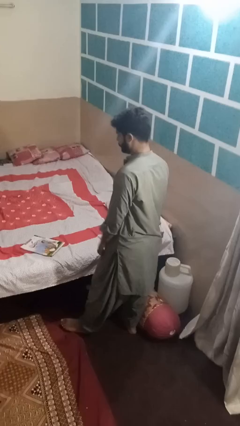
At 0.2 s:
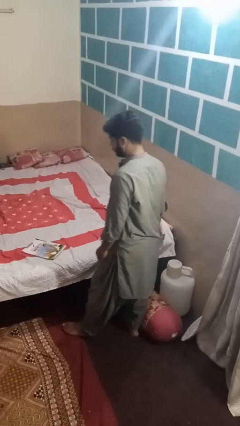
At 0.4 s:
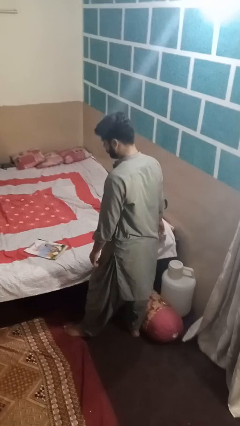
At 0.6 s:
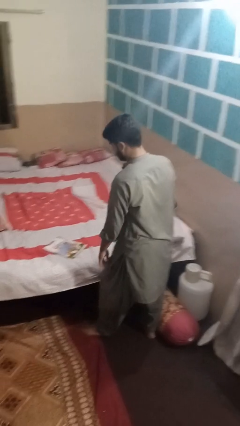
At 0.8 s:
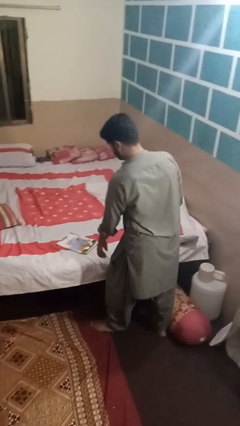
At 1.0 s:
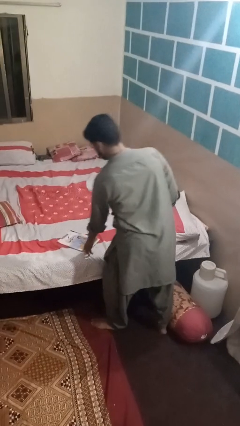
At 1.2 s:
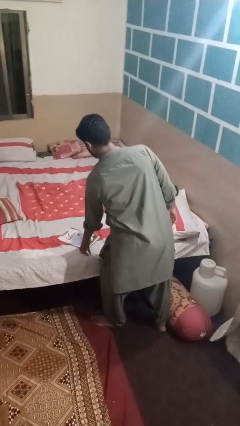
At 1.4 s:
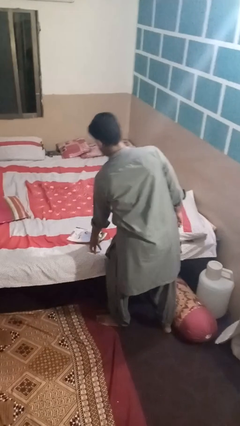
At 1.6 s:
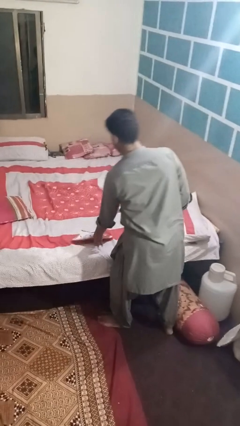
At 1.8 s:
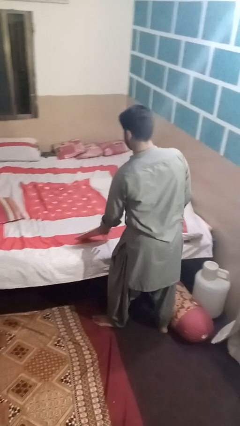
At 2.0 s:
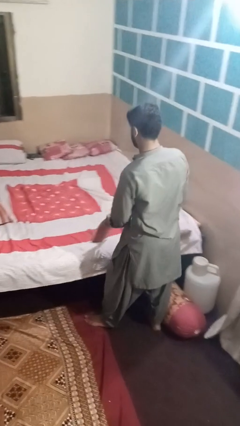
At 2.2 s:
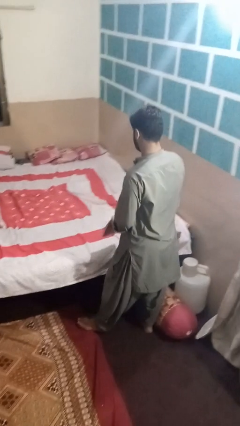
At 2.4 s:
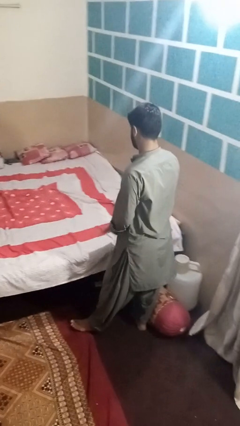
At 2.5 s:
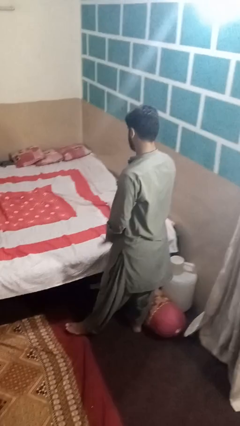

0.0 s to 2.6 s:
person picks up object from bed

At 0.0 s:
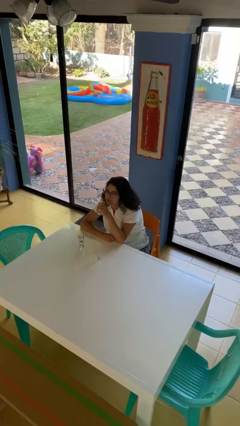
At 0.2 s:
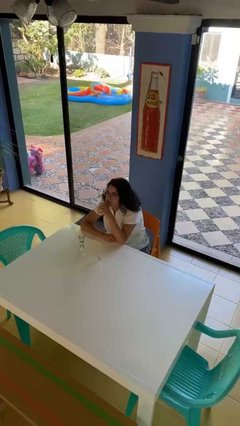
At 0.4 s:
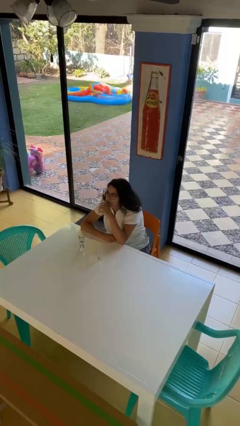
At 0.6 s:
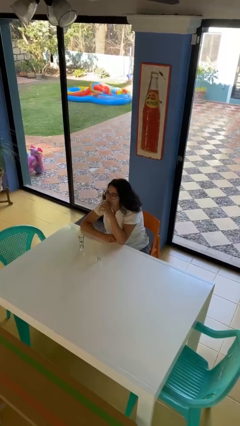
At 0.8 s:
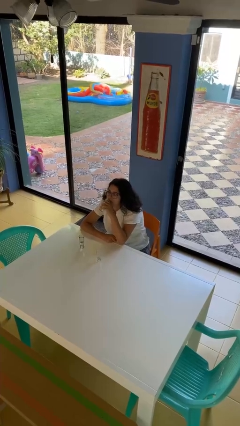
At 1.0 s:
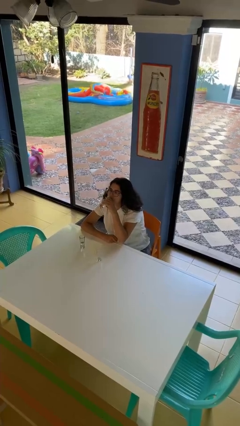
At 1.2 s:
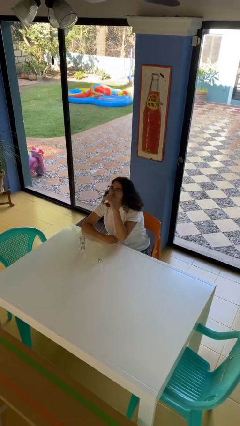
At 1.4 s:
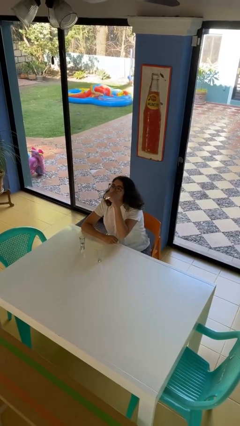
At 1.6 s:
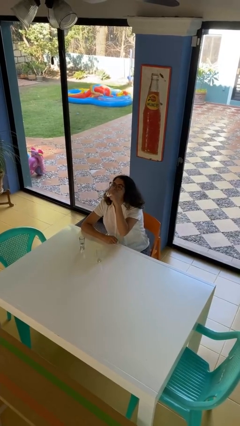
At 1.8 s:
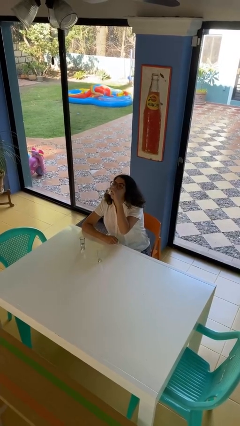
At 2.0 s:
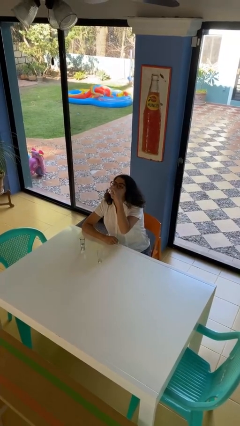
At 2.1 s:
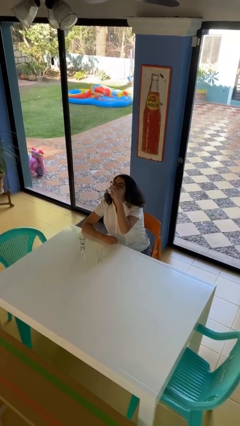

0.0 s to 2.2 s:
person drinks from shotglass

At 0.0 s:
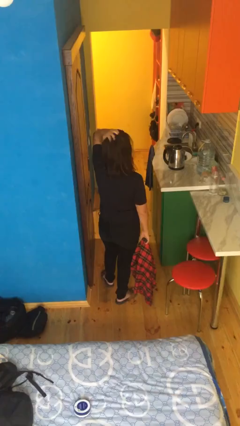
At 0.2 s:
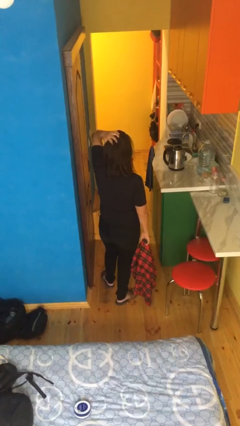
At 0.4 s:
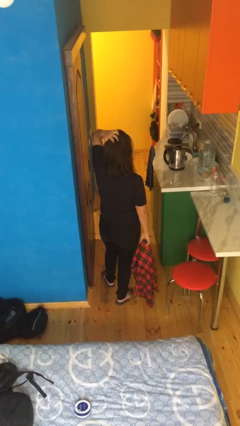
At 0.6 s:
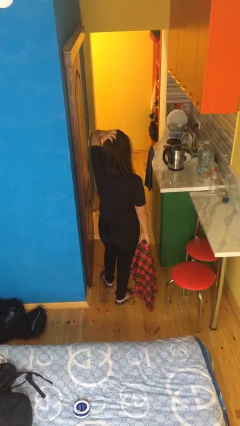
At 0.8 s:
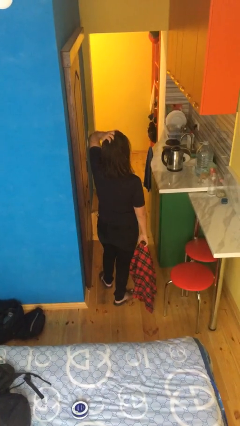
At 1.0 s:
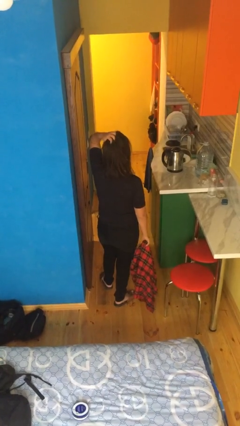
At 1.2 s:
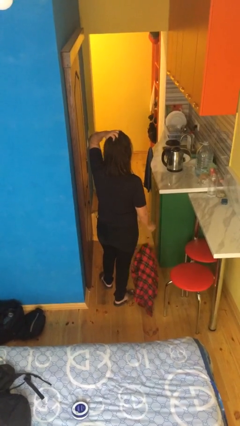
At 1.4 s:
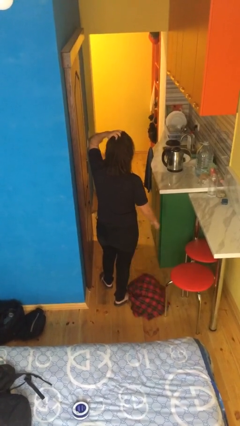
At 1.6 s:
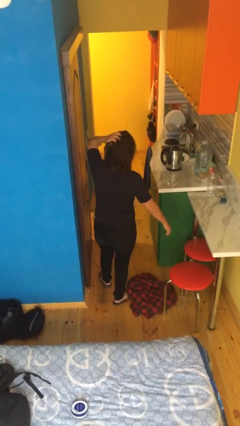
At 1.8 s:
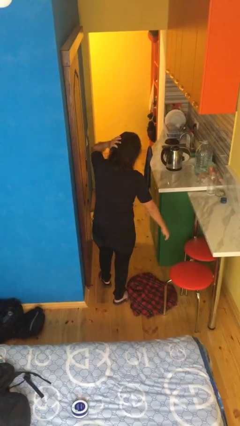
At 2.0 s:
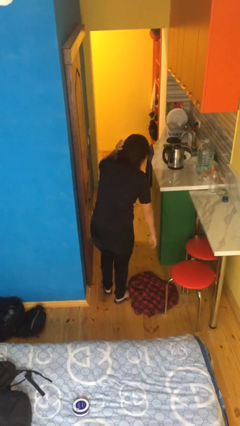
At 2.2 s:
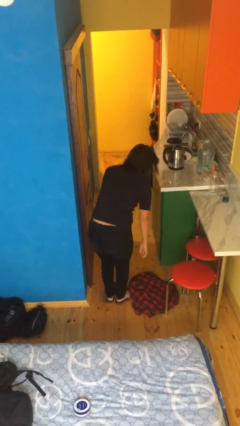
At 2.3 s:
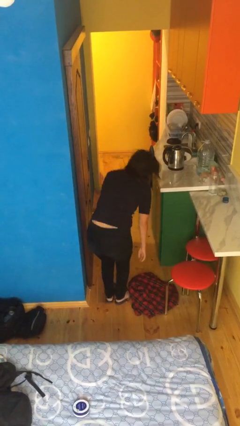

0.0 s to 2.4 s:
person drops object

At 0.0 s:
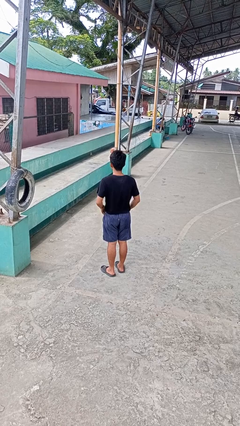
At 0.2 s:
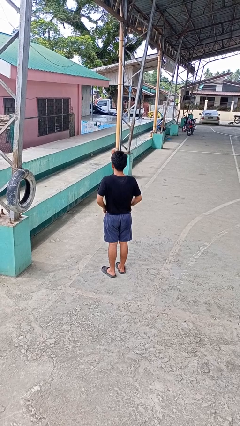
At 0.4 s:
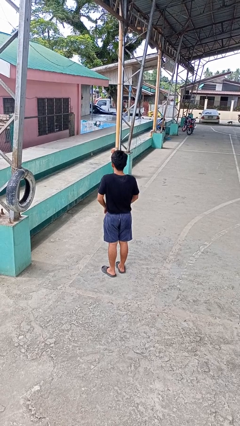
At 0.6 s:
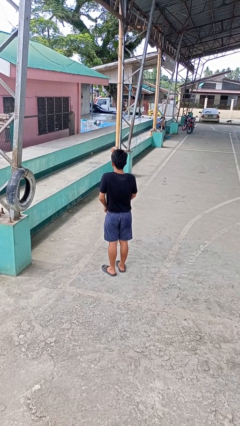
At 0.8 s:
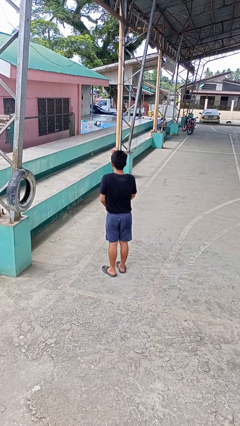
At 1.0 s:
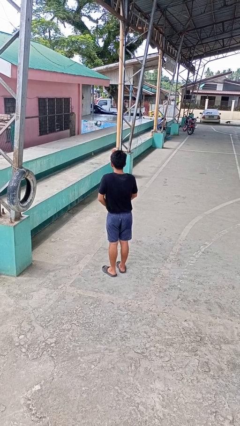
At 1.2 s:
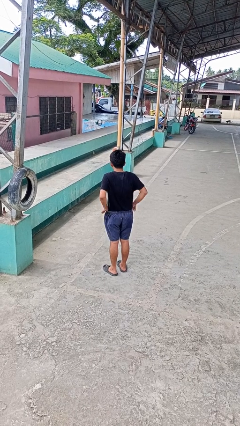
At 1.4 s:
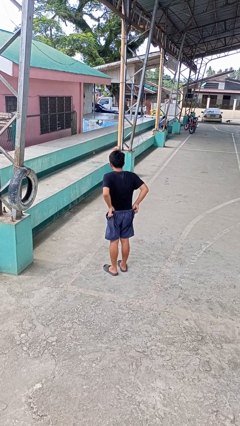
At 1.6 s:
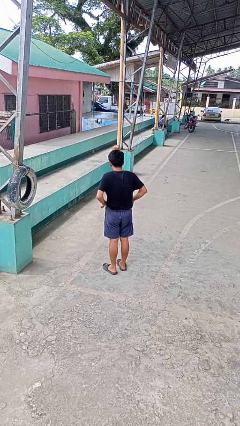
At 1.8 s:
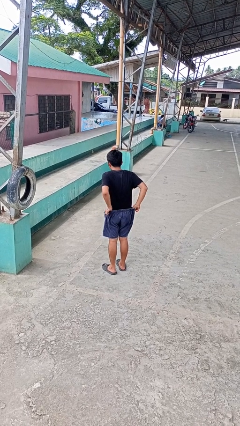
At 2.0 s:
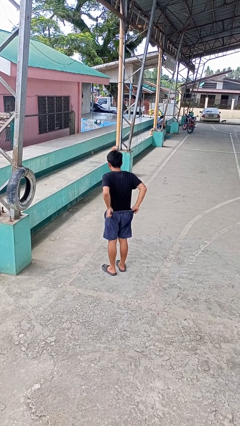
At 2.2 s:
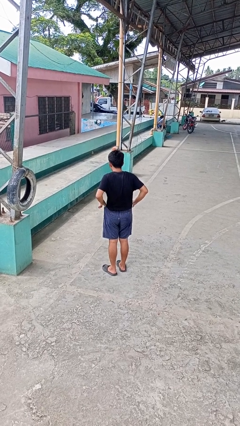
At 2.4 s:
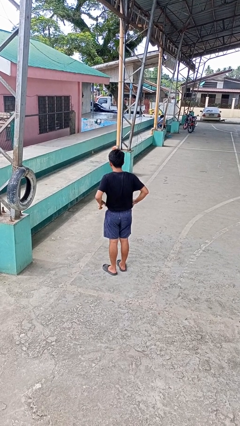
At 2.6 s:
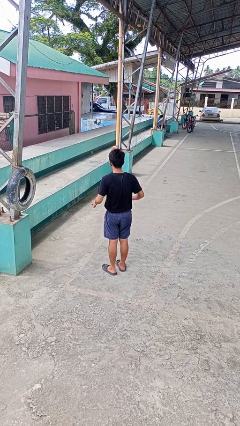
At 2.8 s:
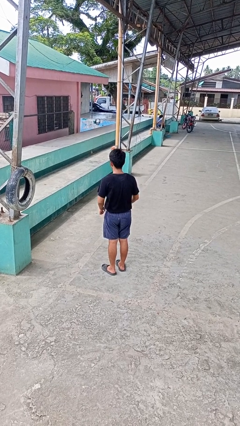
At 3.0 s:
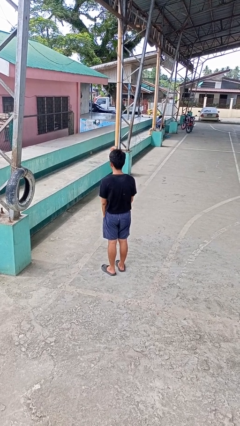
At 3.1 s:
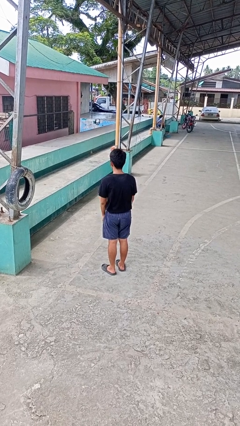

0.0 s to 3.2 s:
person hikes up pants

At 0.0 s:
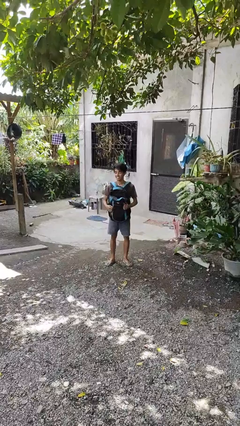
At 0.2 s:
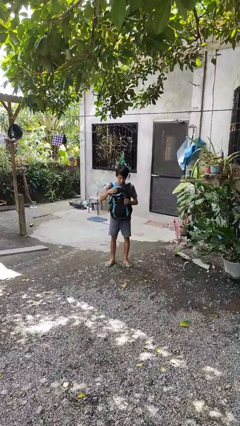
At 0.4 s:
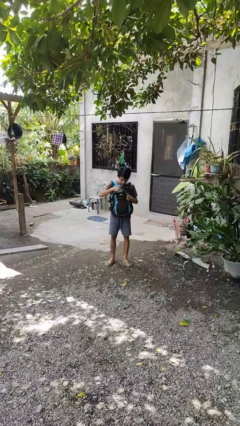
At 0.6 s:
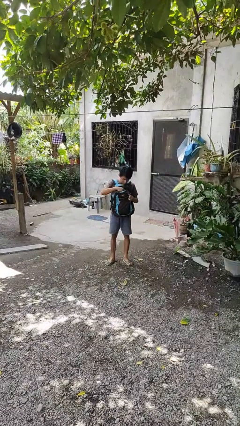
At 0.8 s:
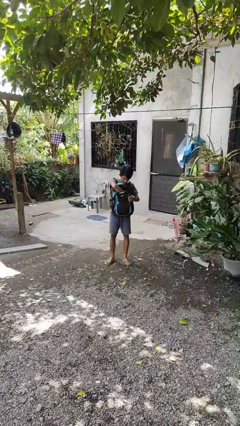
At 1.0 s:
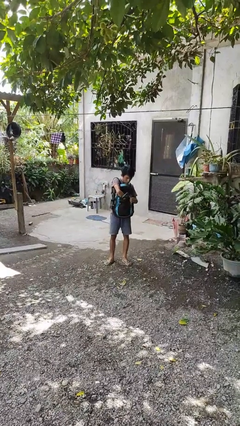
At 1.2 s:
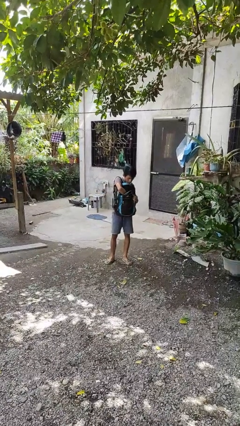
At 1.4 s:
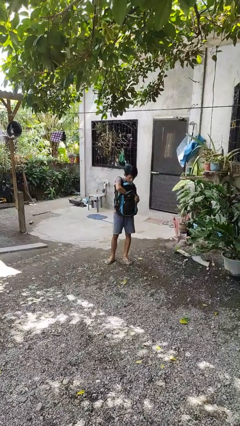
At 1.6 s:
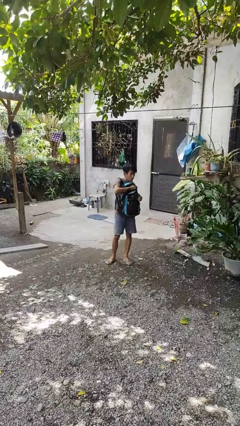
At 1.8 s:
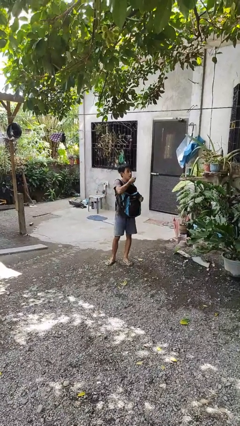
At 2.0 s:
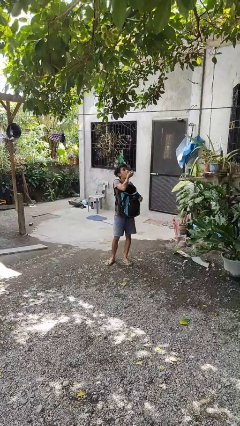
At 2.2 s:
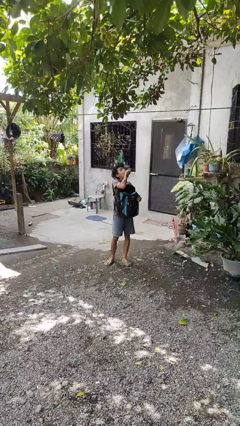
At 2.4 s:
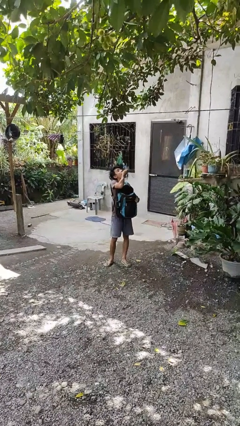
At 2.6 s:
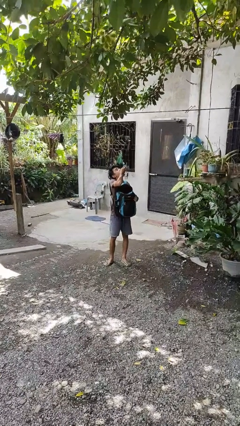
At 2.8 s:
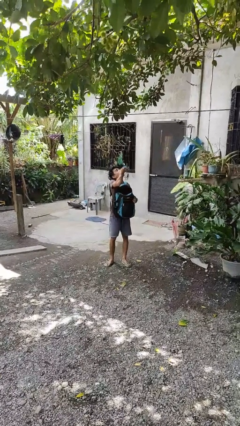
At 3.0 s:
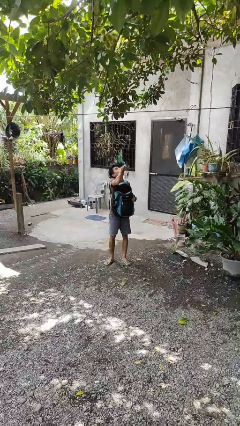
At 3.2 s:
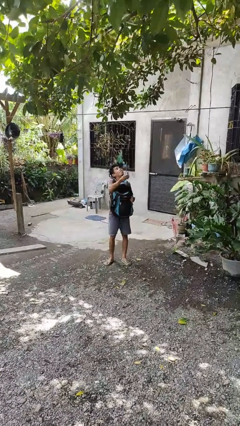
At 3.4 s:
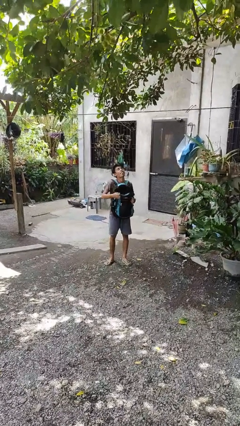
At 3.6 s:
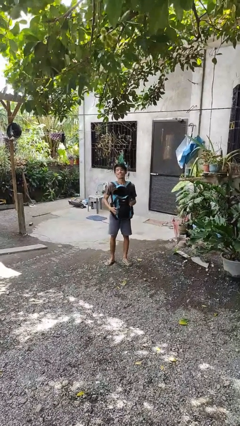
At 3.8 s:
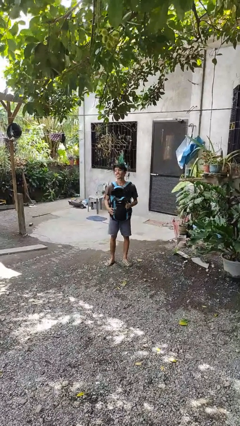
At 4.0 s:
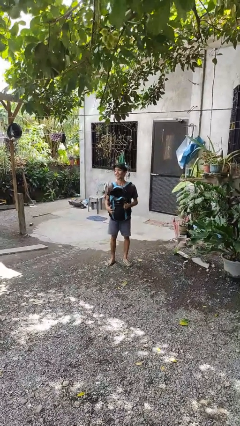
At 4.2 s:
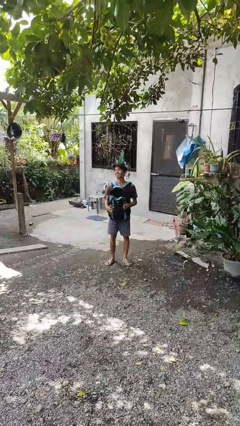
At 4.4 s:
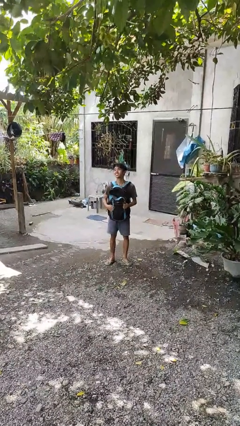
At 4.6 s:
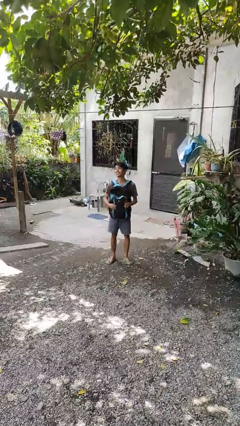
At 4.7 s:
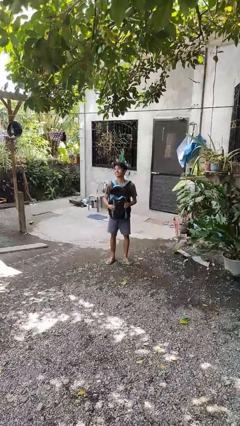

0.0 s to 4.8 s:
person eats snack from bag

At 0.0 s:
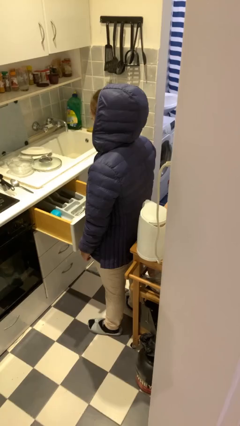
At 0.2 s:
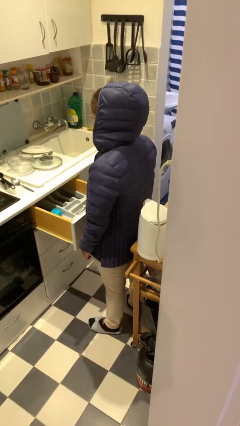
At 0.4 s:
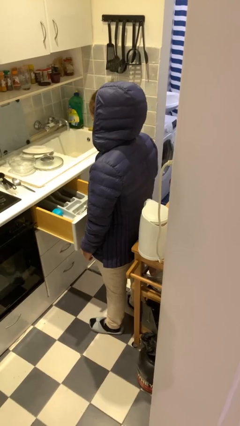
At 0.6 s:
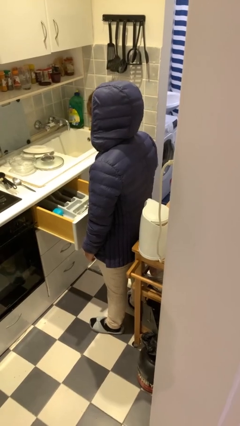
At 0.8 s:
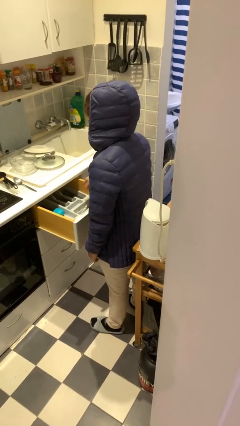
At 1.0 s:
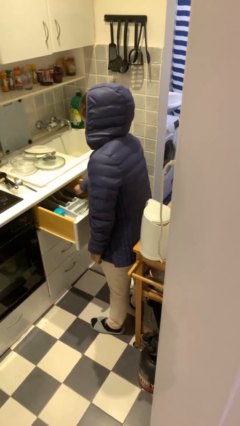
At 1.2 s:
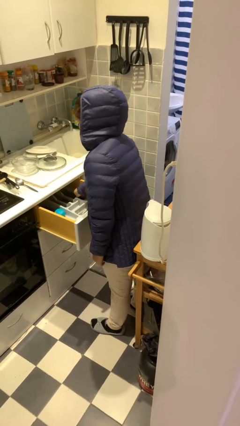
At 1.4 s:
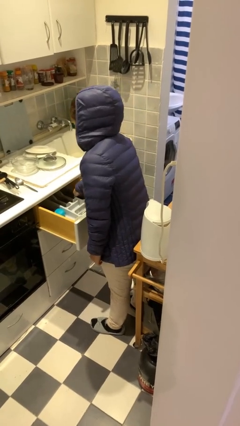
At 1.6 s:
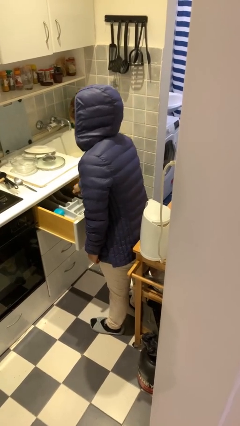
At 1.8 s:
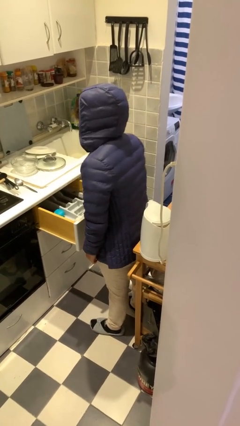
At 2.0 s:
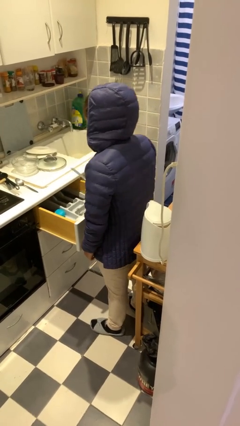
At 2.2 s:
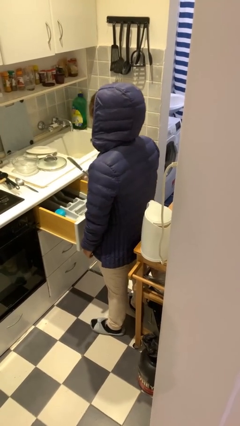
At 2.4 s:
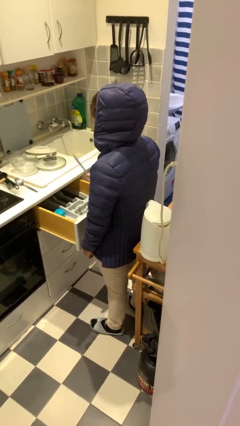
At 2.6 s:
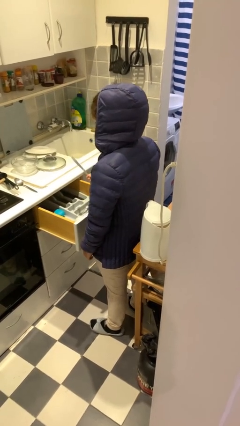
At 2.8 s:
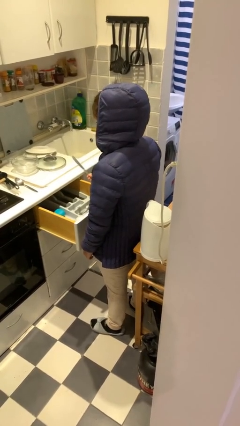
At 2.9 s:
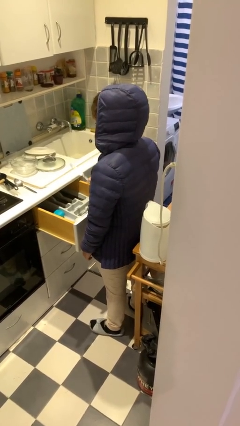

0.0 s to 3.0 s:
person takes object from kitchen drawer
